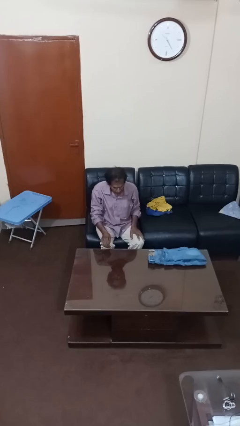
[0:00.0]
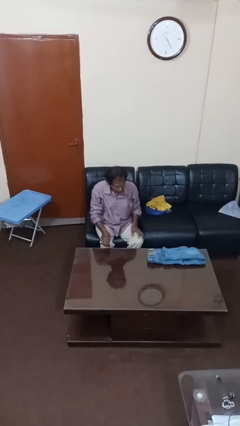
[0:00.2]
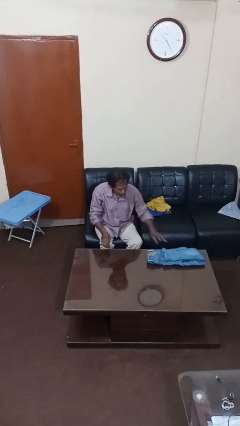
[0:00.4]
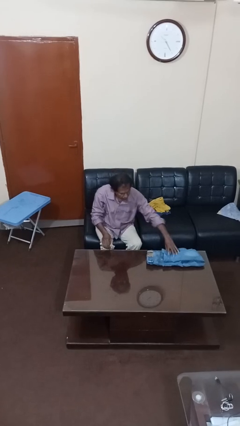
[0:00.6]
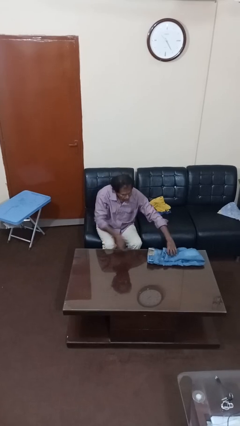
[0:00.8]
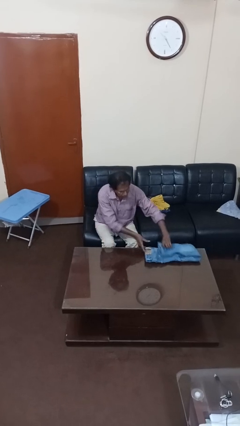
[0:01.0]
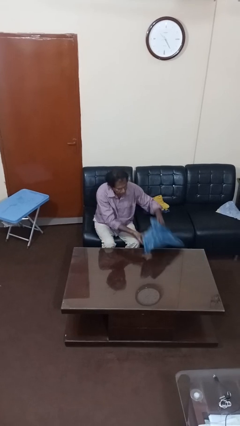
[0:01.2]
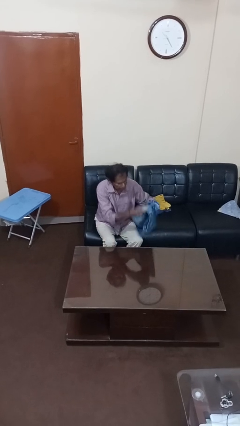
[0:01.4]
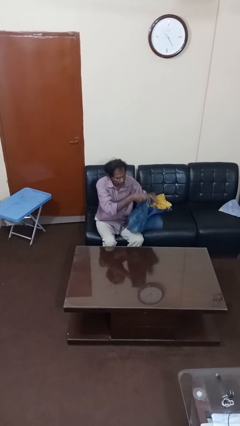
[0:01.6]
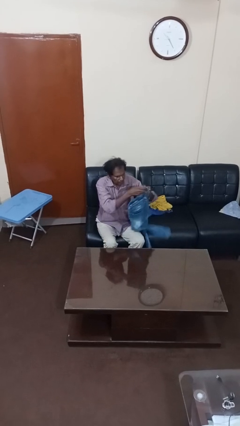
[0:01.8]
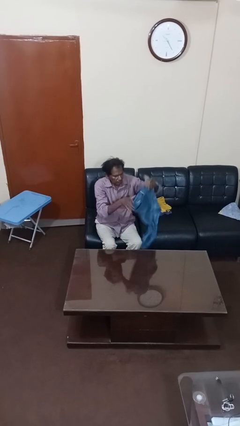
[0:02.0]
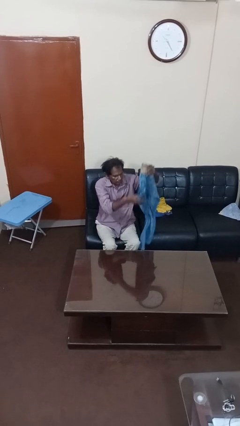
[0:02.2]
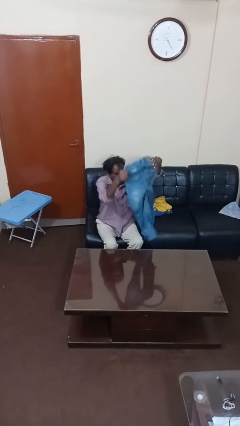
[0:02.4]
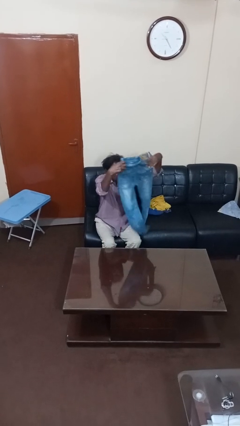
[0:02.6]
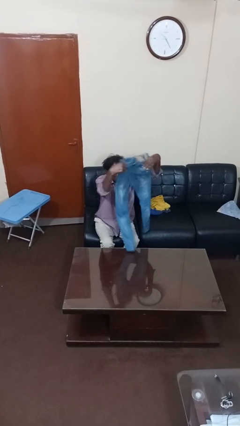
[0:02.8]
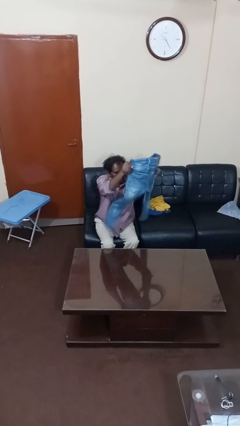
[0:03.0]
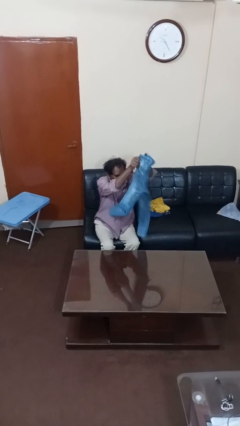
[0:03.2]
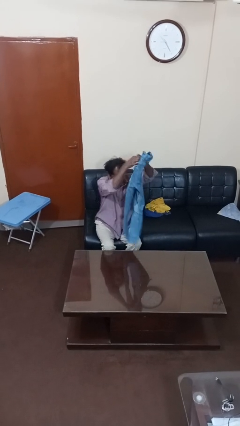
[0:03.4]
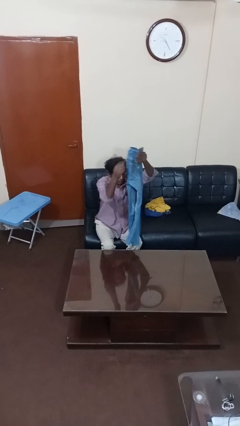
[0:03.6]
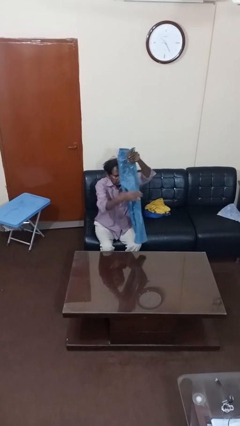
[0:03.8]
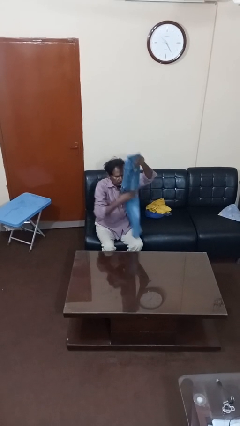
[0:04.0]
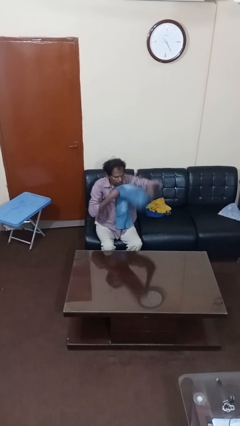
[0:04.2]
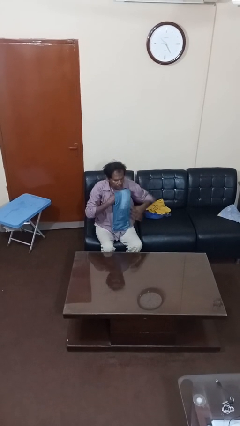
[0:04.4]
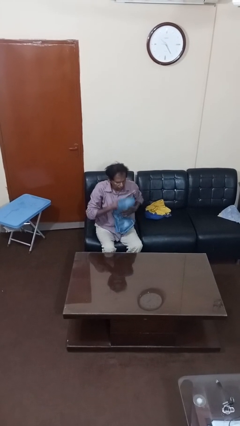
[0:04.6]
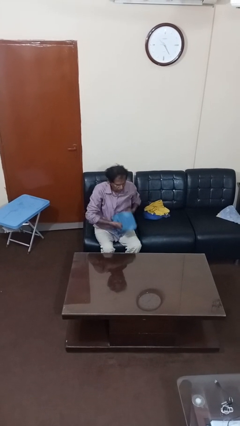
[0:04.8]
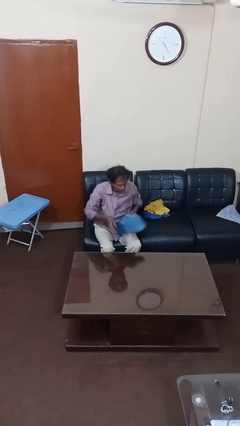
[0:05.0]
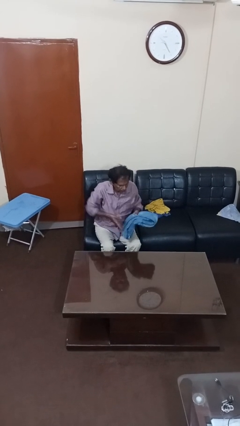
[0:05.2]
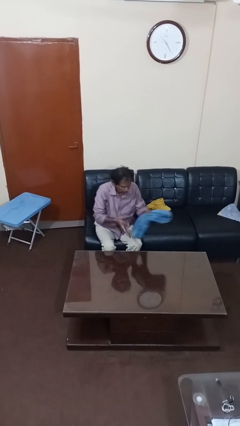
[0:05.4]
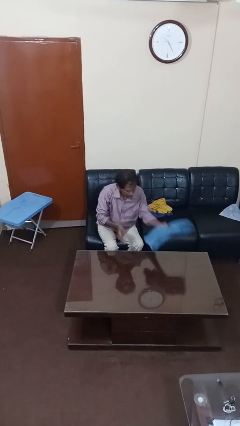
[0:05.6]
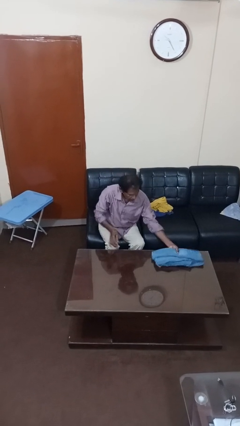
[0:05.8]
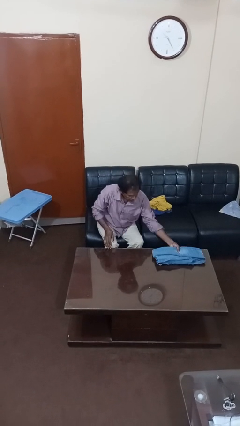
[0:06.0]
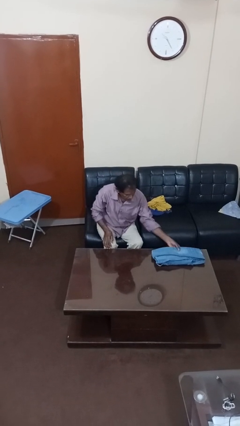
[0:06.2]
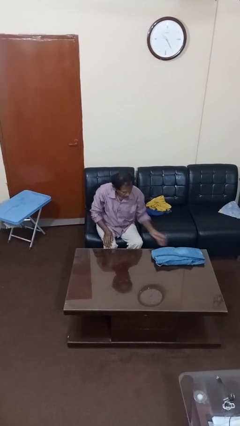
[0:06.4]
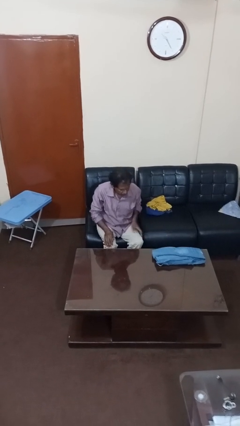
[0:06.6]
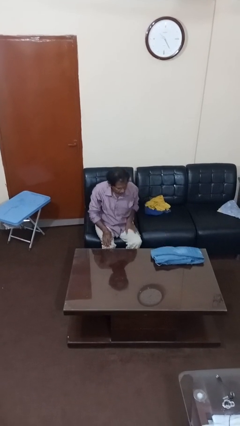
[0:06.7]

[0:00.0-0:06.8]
person folds pants

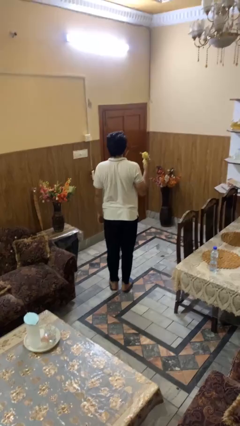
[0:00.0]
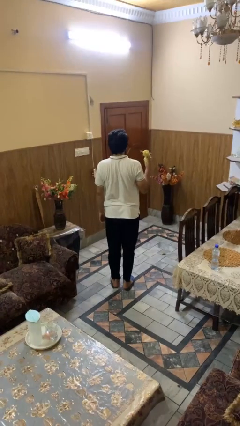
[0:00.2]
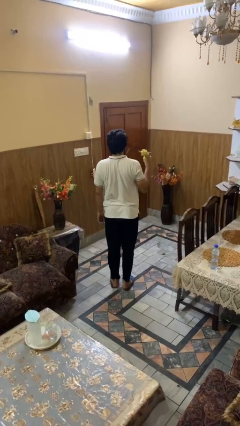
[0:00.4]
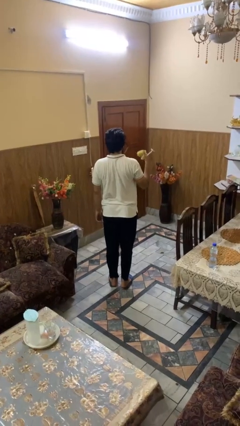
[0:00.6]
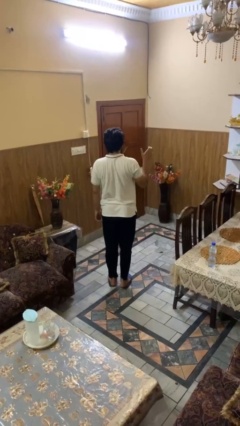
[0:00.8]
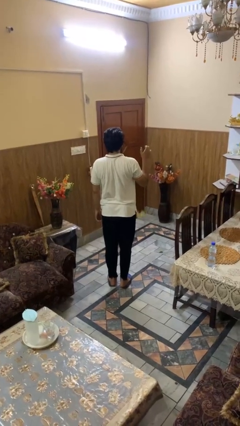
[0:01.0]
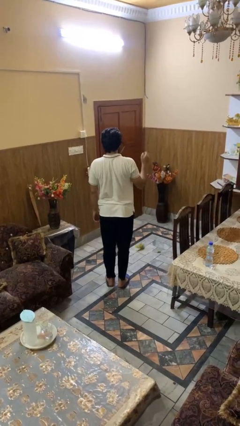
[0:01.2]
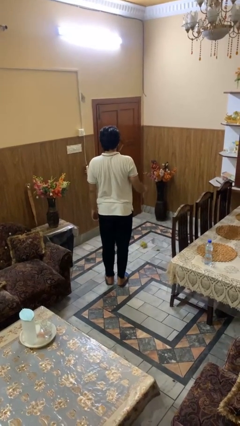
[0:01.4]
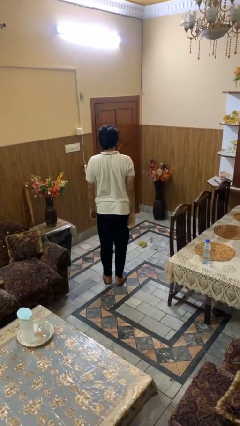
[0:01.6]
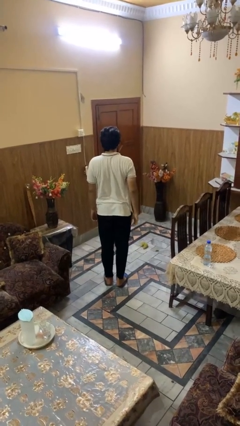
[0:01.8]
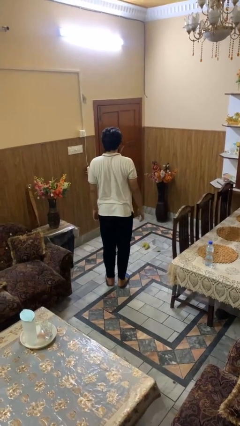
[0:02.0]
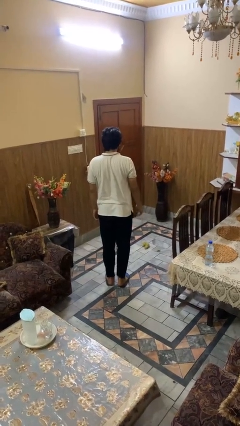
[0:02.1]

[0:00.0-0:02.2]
person throws object to ground

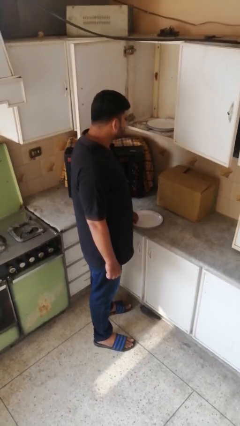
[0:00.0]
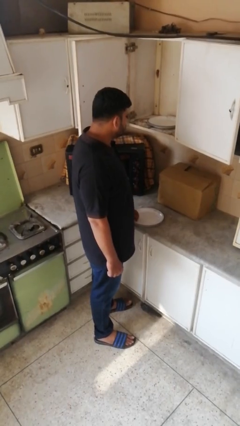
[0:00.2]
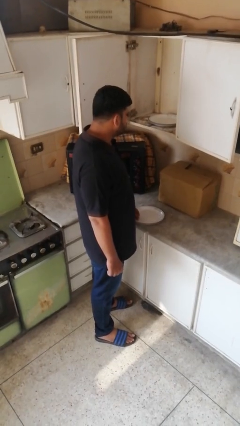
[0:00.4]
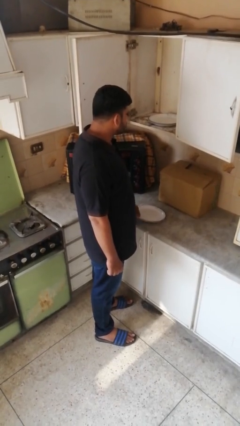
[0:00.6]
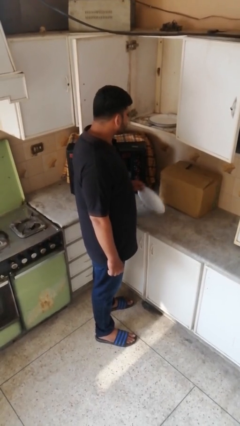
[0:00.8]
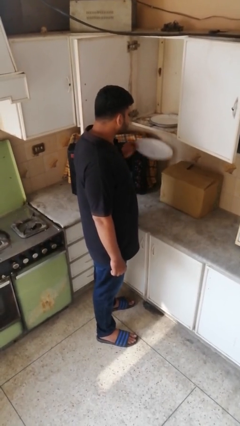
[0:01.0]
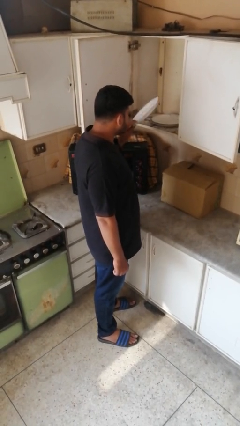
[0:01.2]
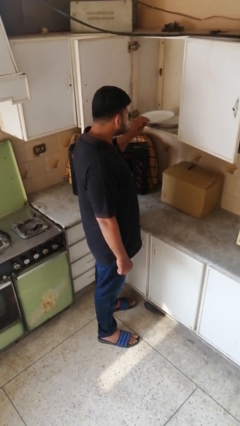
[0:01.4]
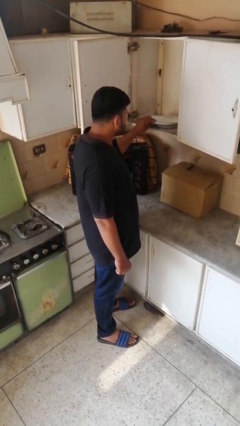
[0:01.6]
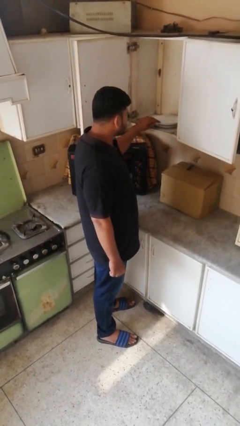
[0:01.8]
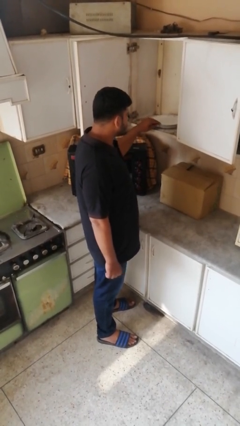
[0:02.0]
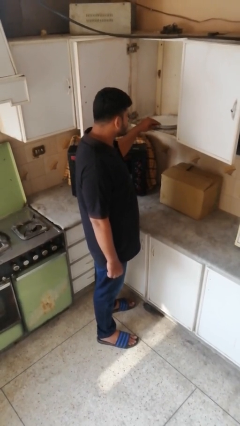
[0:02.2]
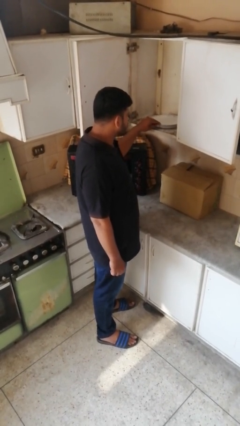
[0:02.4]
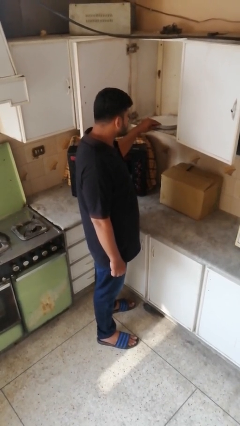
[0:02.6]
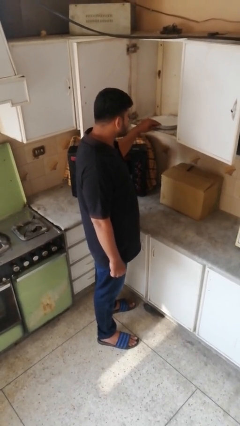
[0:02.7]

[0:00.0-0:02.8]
person puts object in cabinet

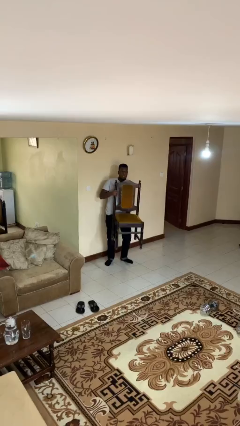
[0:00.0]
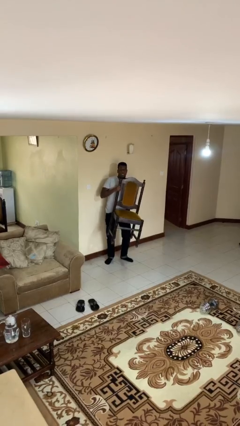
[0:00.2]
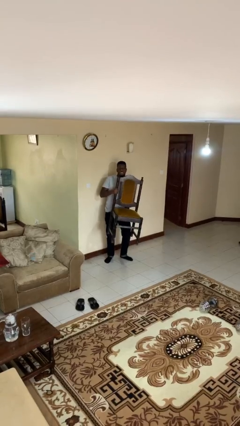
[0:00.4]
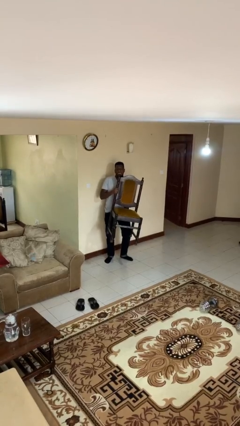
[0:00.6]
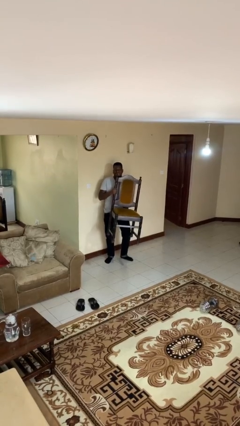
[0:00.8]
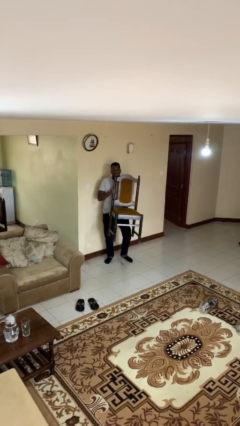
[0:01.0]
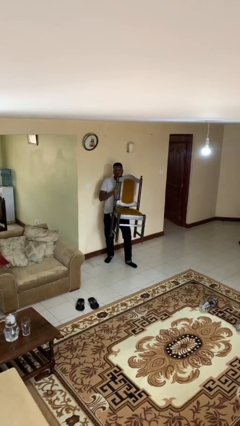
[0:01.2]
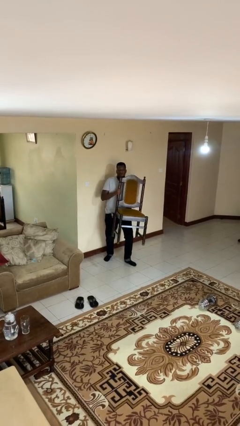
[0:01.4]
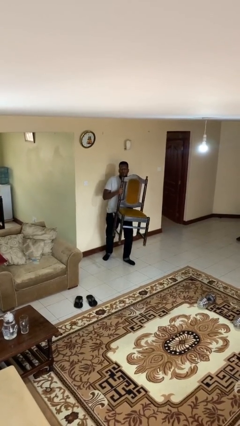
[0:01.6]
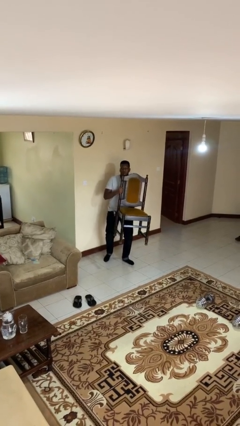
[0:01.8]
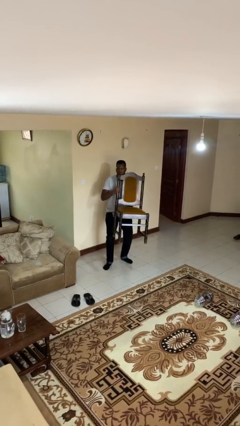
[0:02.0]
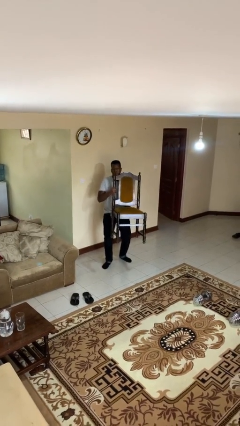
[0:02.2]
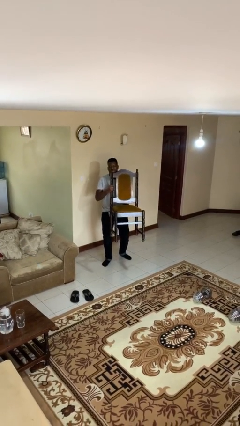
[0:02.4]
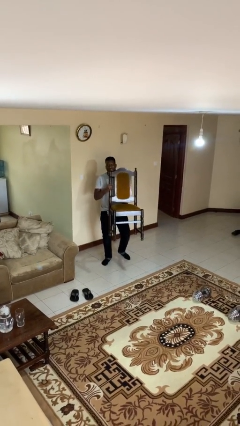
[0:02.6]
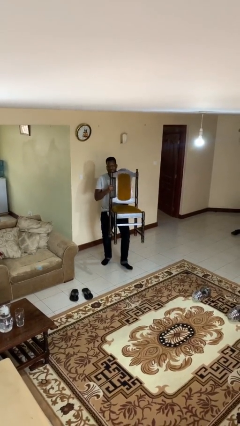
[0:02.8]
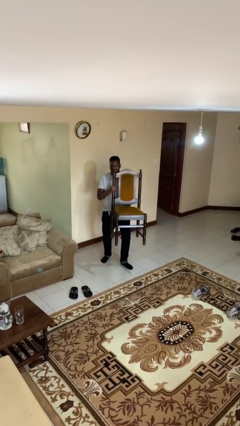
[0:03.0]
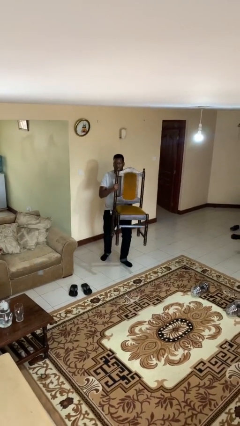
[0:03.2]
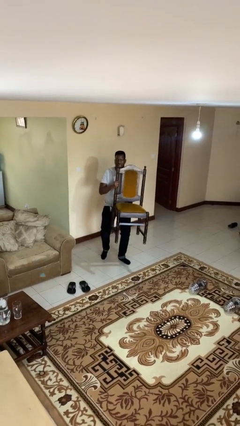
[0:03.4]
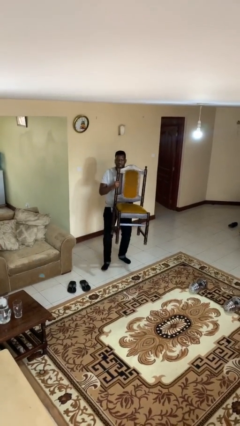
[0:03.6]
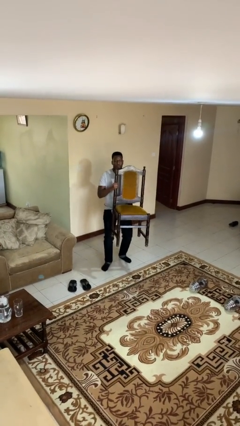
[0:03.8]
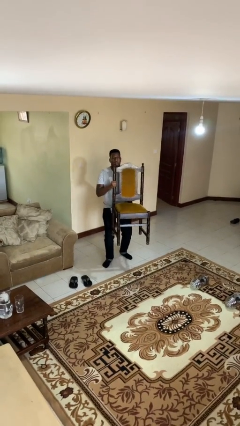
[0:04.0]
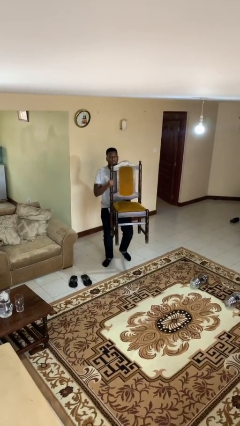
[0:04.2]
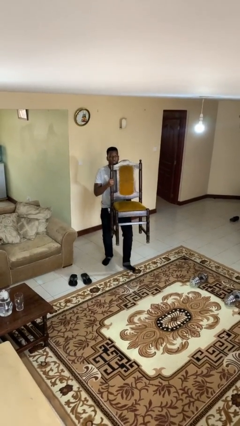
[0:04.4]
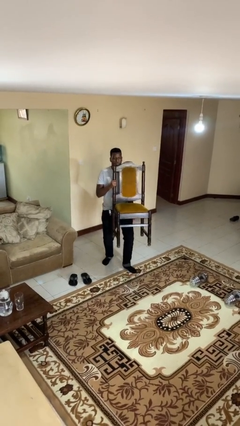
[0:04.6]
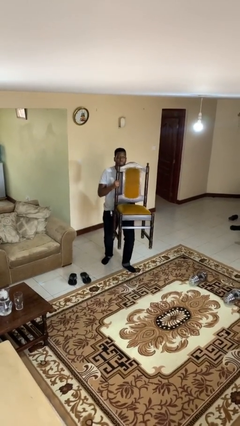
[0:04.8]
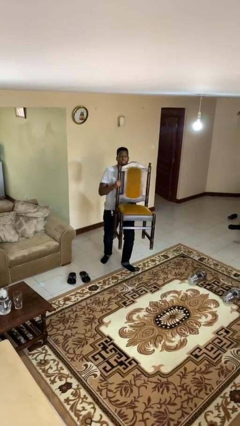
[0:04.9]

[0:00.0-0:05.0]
person carries heavy object

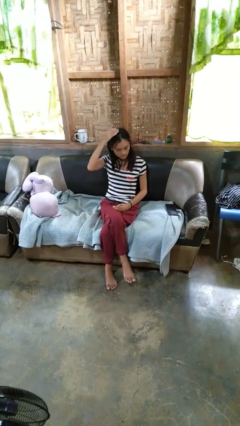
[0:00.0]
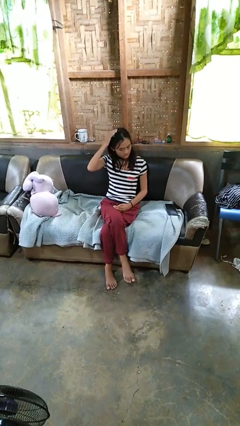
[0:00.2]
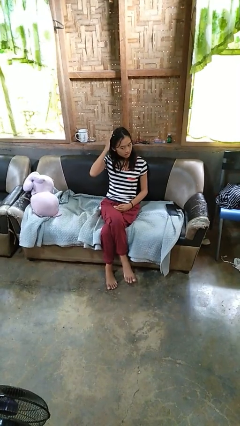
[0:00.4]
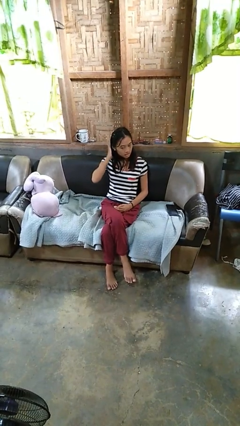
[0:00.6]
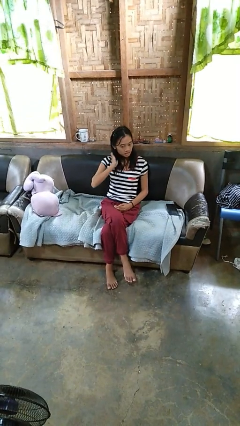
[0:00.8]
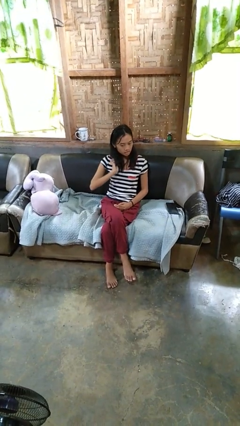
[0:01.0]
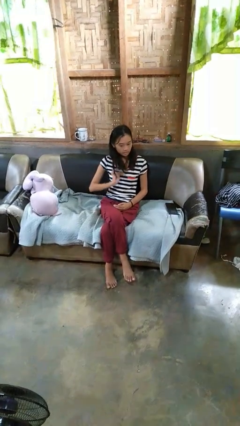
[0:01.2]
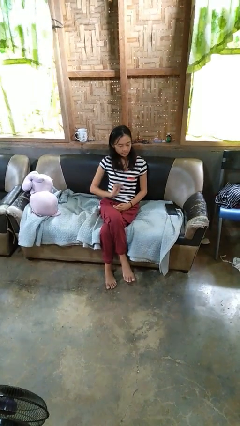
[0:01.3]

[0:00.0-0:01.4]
person strokes hair
